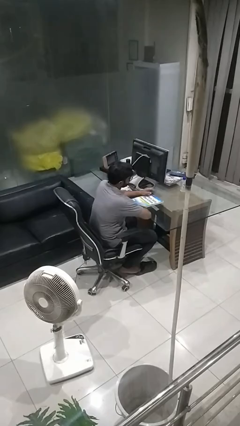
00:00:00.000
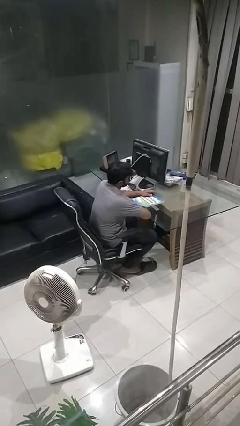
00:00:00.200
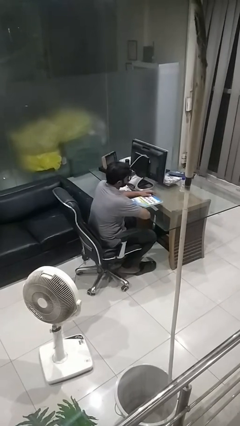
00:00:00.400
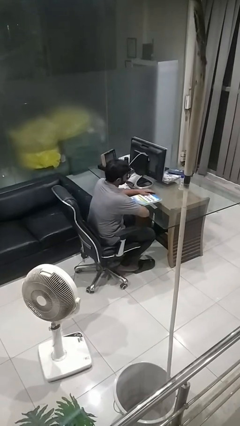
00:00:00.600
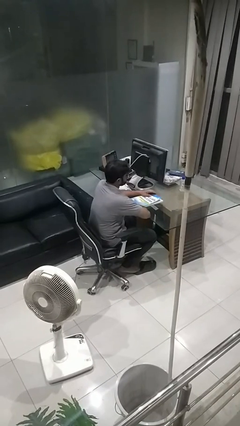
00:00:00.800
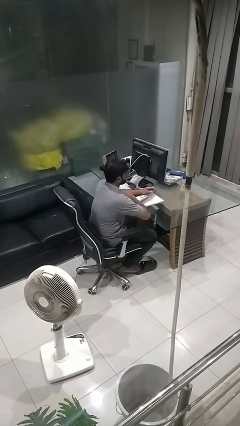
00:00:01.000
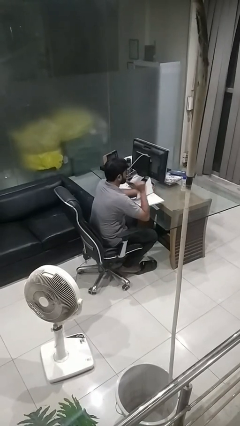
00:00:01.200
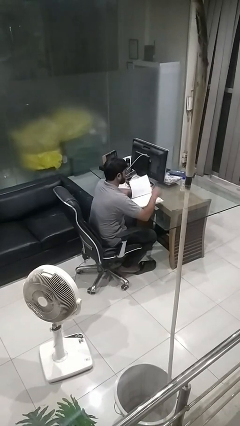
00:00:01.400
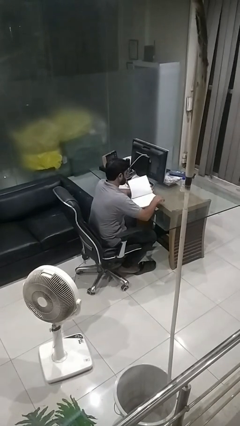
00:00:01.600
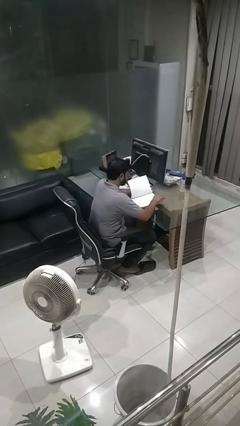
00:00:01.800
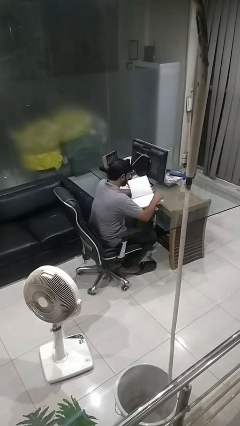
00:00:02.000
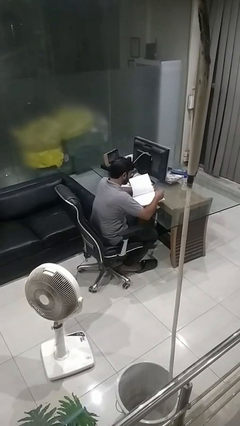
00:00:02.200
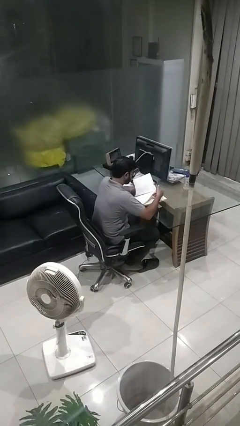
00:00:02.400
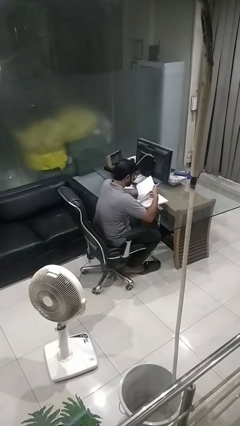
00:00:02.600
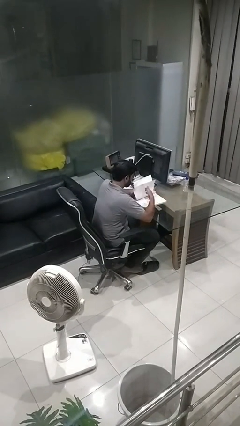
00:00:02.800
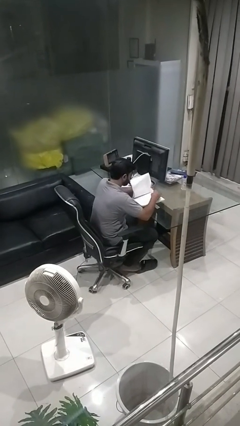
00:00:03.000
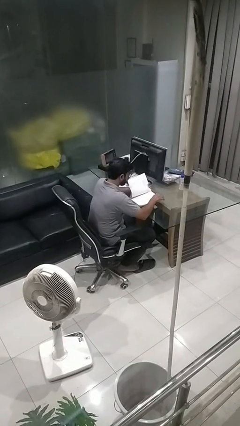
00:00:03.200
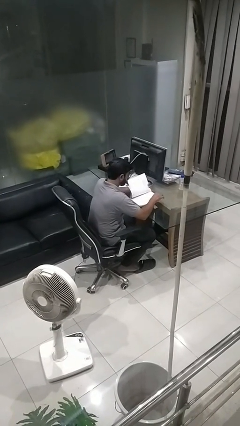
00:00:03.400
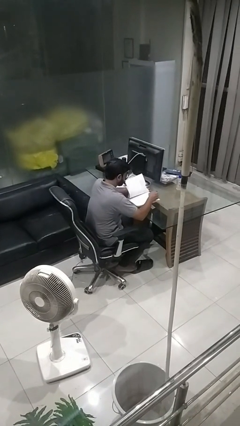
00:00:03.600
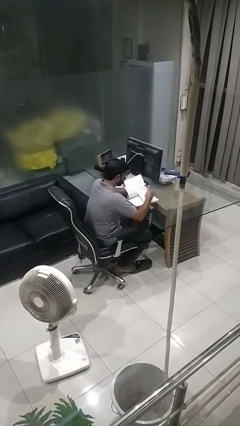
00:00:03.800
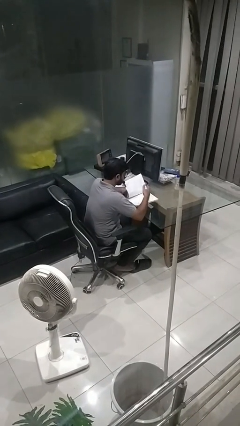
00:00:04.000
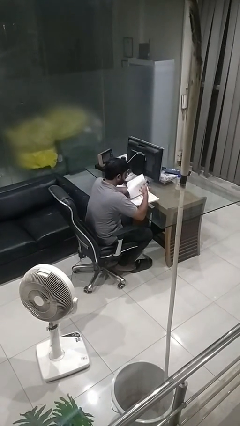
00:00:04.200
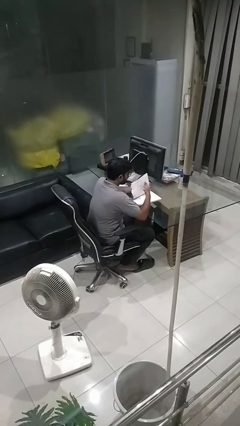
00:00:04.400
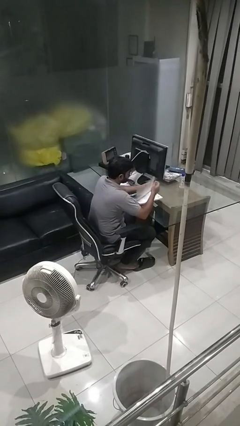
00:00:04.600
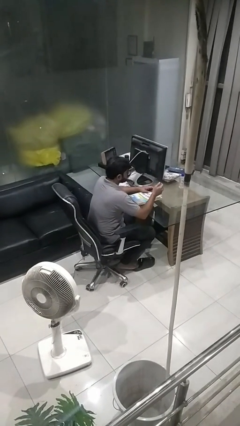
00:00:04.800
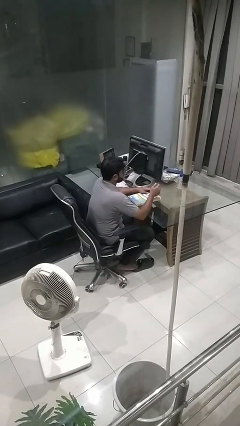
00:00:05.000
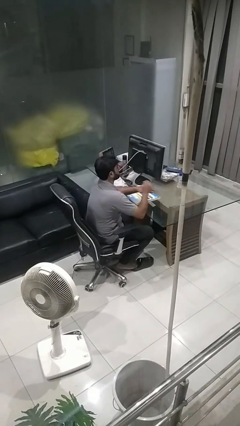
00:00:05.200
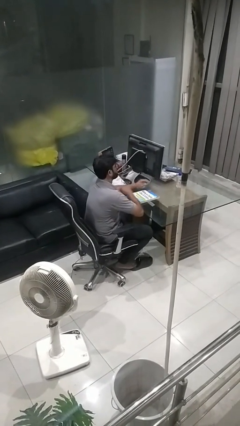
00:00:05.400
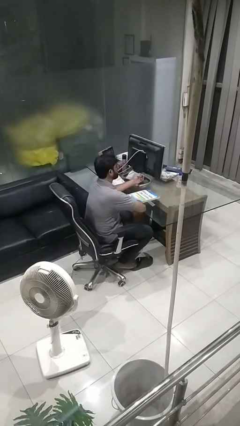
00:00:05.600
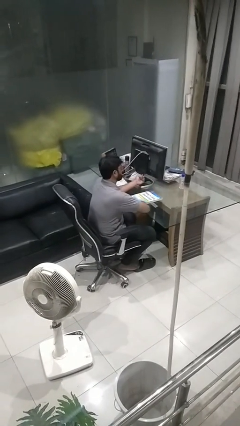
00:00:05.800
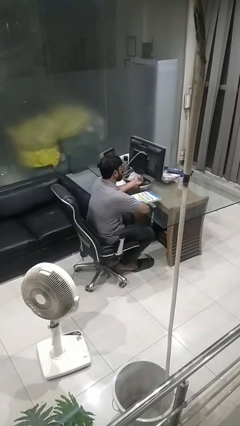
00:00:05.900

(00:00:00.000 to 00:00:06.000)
person reads book

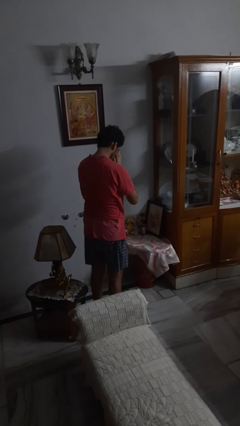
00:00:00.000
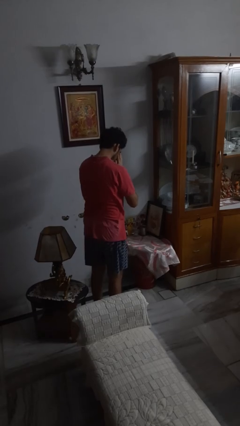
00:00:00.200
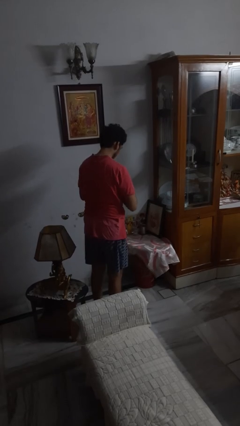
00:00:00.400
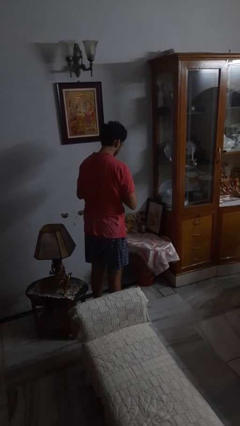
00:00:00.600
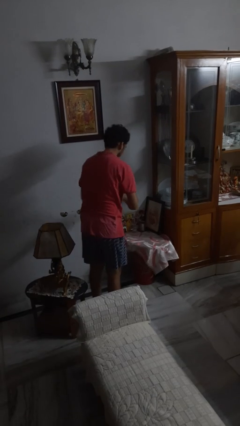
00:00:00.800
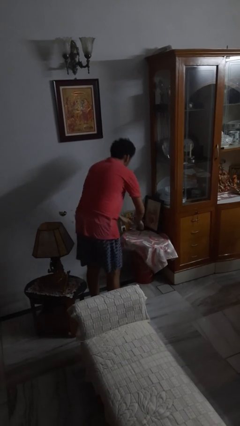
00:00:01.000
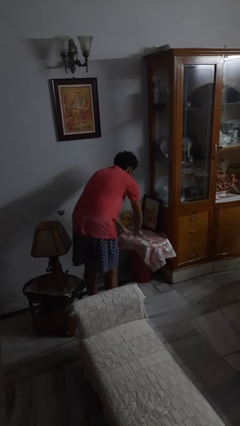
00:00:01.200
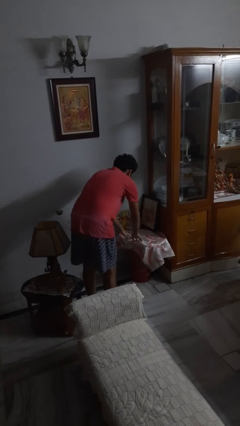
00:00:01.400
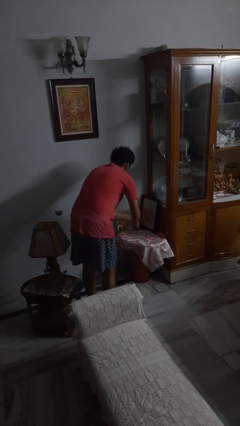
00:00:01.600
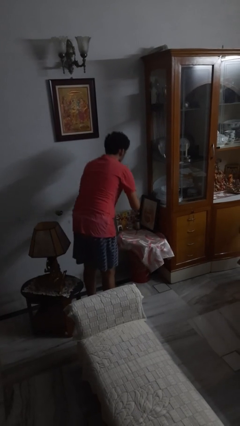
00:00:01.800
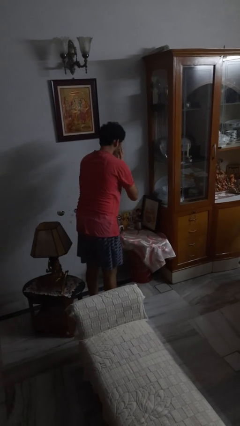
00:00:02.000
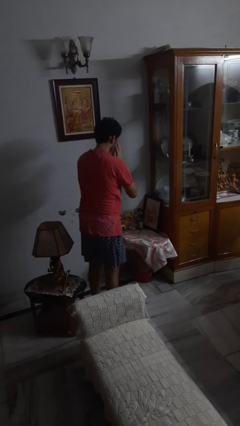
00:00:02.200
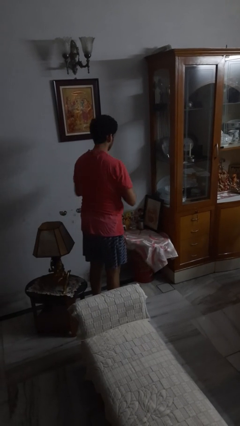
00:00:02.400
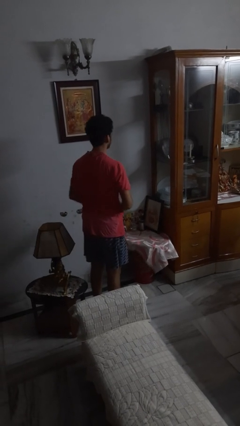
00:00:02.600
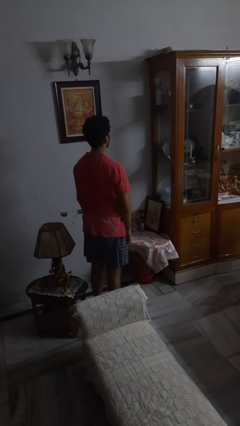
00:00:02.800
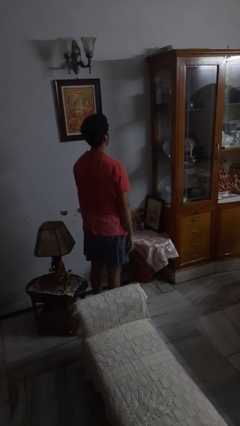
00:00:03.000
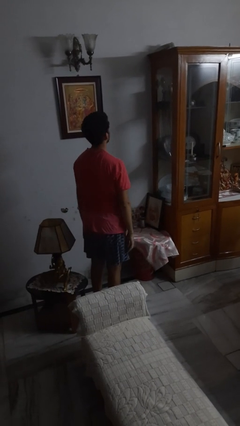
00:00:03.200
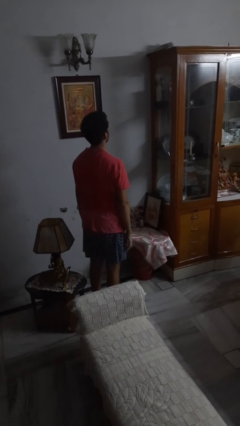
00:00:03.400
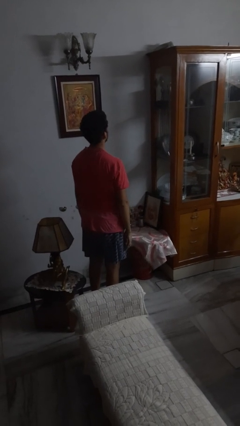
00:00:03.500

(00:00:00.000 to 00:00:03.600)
person prays

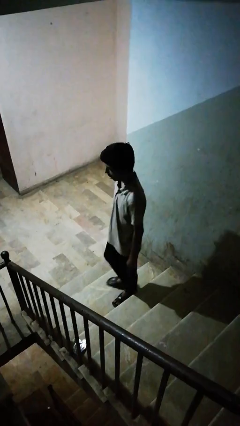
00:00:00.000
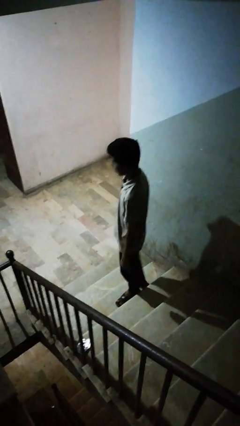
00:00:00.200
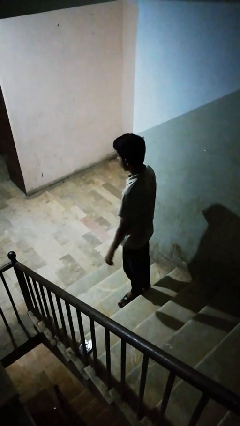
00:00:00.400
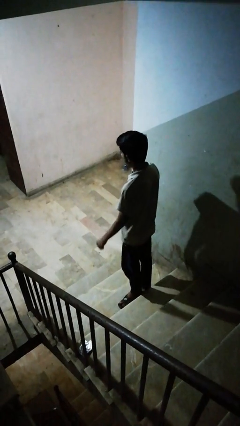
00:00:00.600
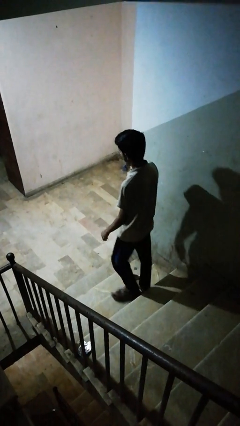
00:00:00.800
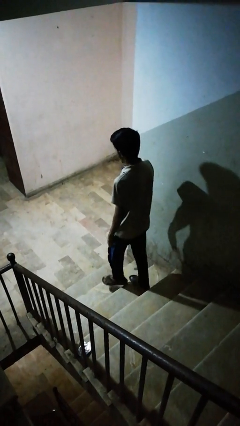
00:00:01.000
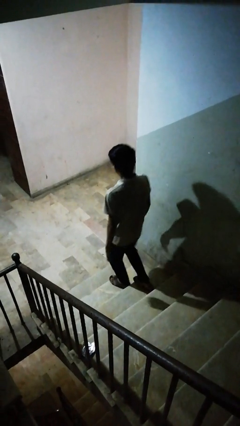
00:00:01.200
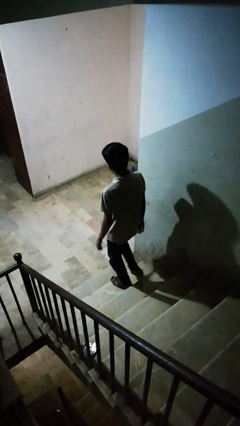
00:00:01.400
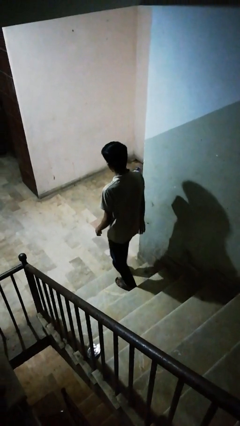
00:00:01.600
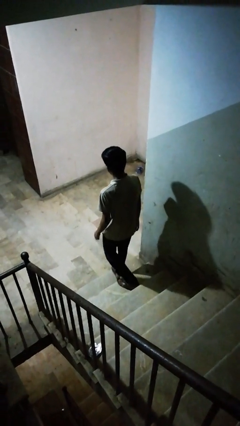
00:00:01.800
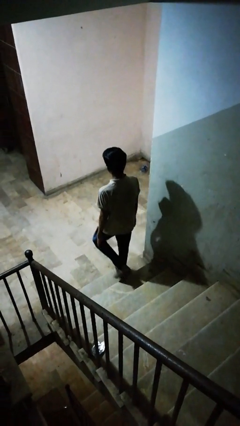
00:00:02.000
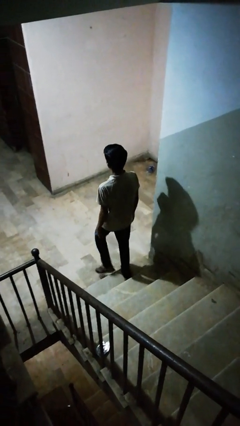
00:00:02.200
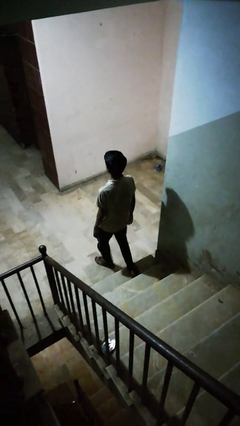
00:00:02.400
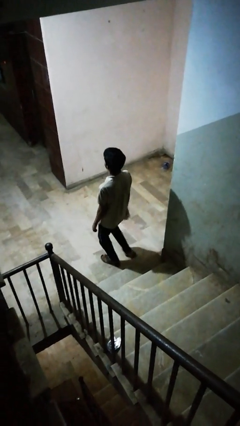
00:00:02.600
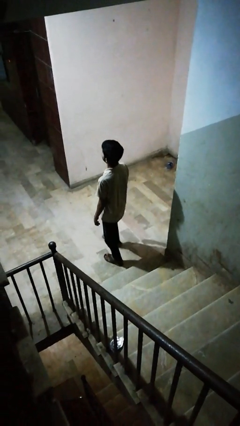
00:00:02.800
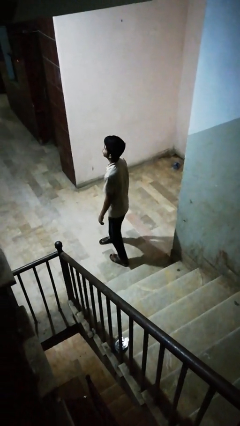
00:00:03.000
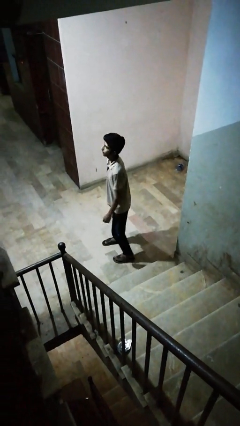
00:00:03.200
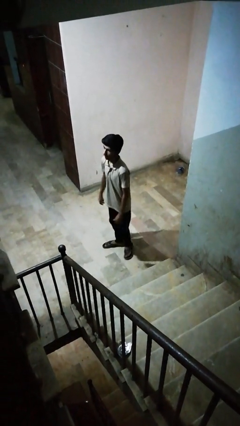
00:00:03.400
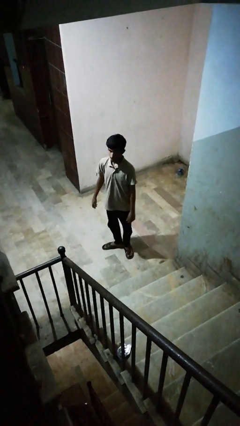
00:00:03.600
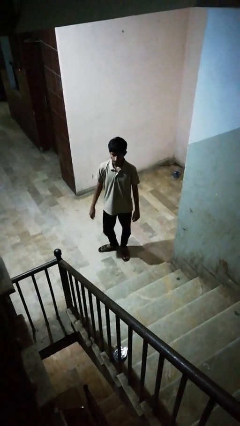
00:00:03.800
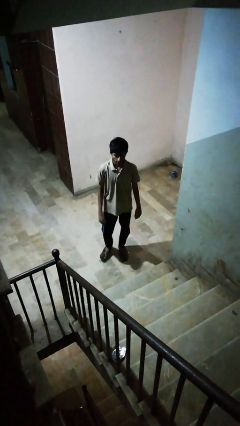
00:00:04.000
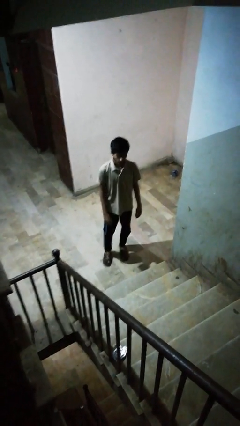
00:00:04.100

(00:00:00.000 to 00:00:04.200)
person climbs down stairs

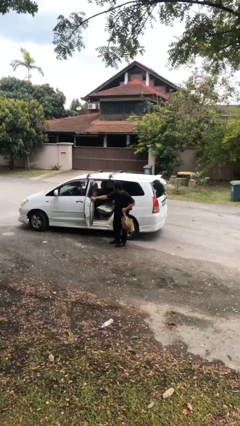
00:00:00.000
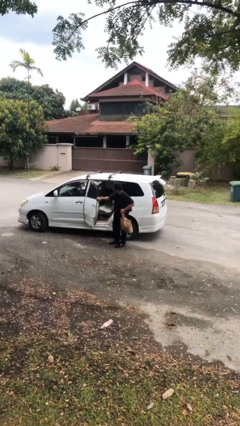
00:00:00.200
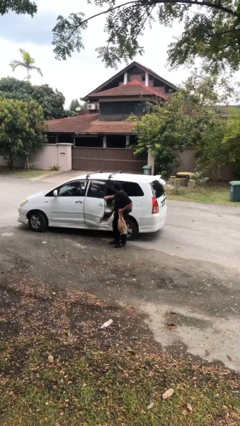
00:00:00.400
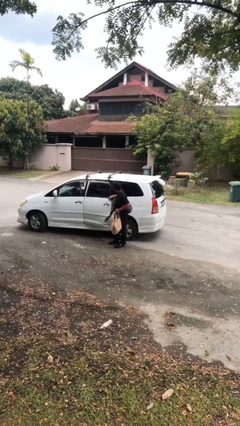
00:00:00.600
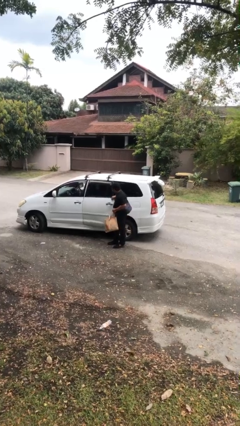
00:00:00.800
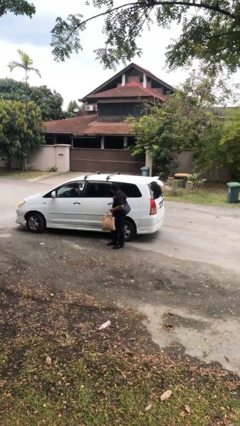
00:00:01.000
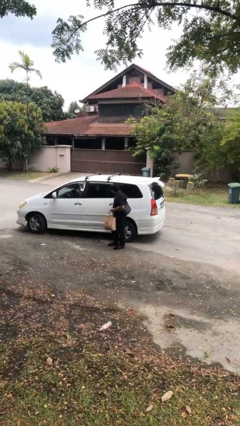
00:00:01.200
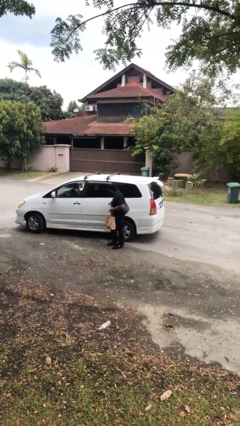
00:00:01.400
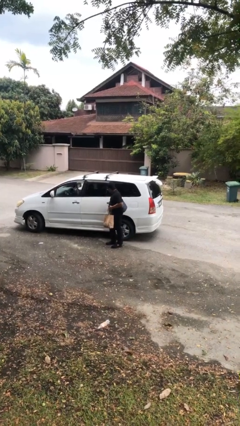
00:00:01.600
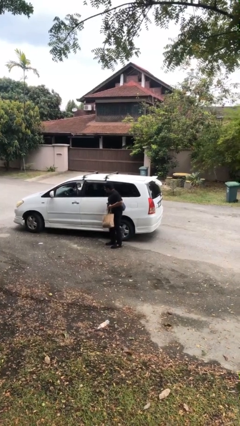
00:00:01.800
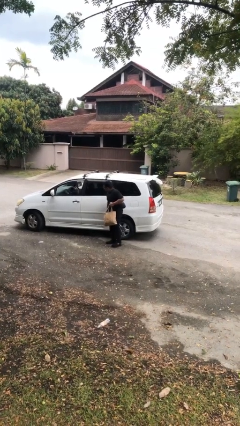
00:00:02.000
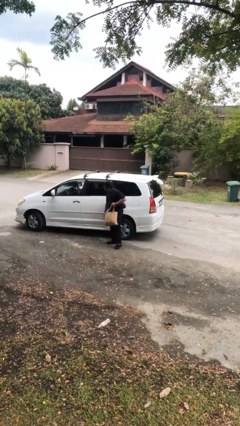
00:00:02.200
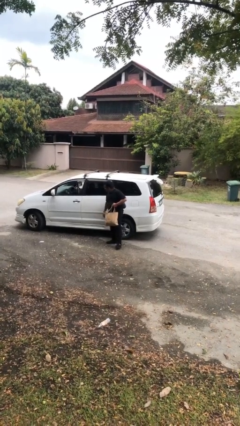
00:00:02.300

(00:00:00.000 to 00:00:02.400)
person closes car door

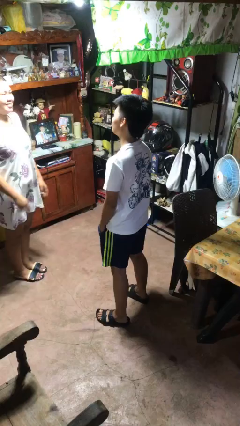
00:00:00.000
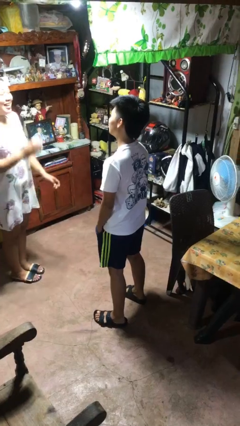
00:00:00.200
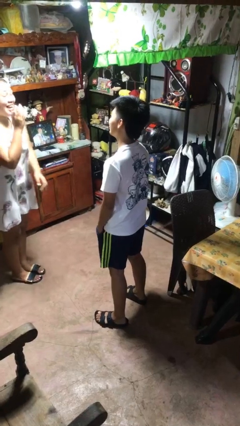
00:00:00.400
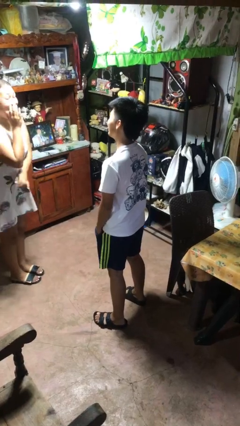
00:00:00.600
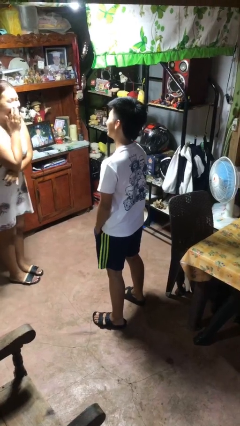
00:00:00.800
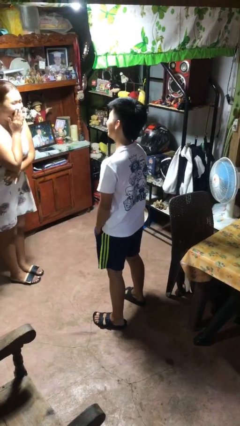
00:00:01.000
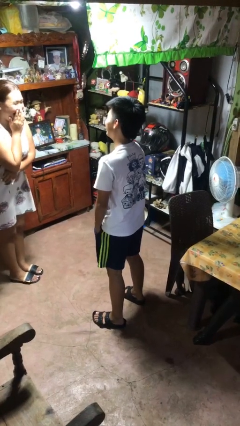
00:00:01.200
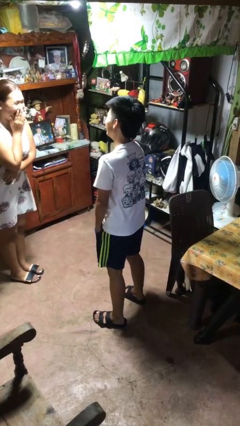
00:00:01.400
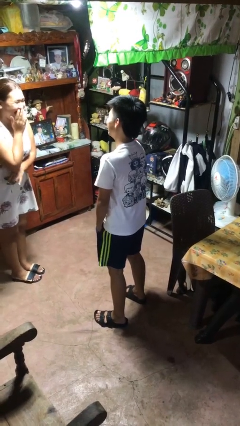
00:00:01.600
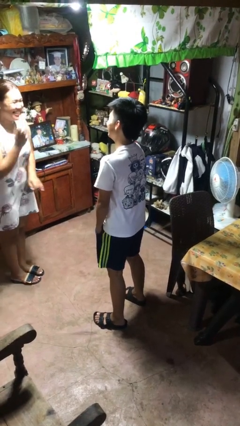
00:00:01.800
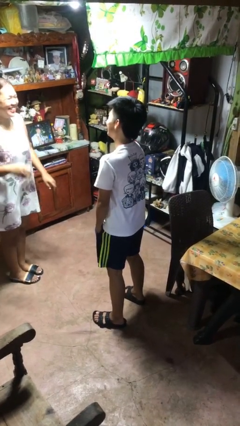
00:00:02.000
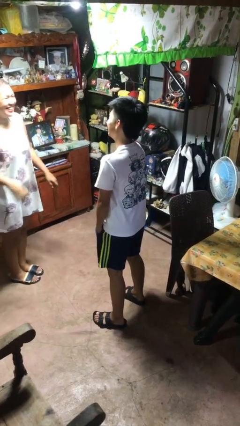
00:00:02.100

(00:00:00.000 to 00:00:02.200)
person laughs with person
